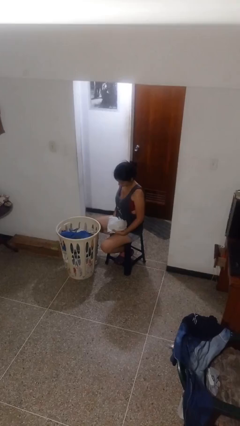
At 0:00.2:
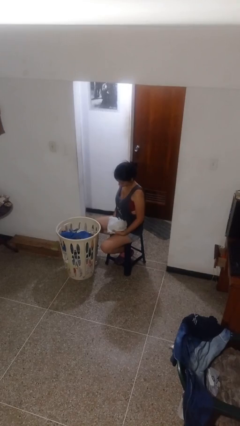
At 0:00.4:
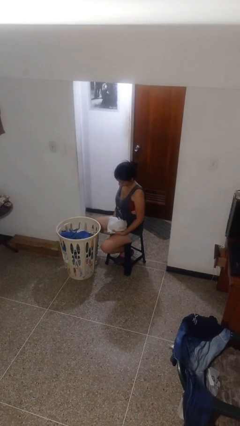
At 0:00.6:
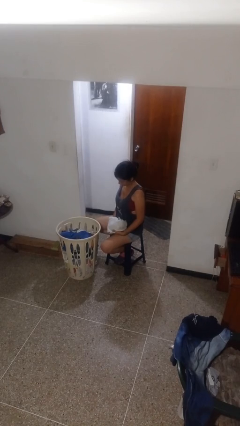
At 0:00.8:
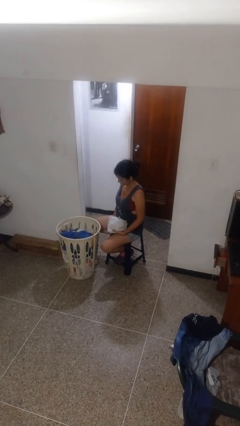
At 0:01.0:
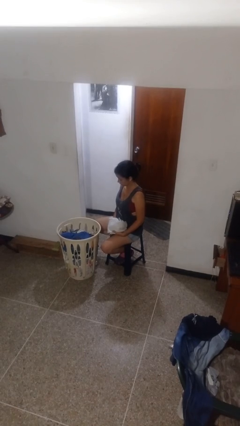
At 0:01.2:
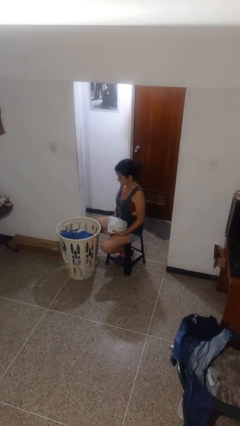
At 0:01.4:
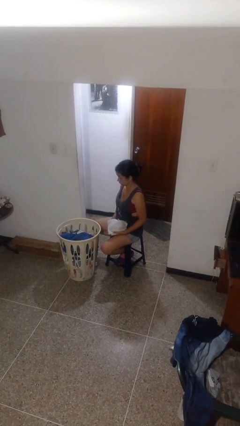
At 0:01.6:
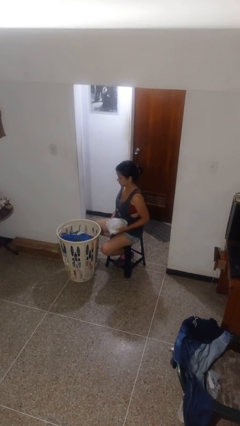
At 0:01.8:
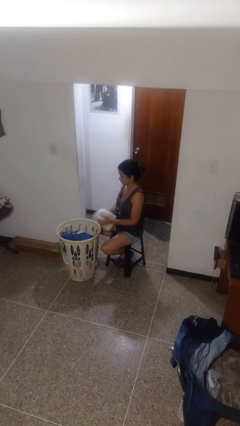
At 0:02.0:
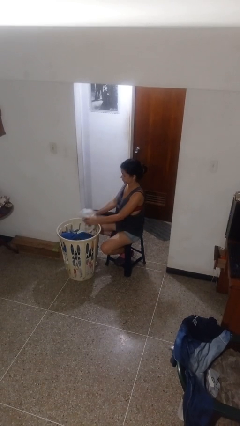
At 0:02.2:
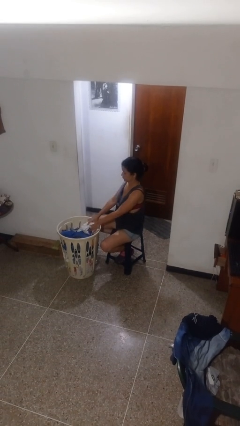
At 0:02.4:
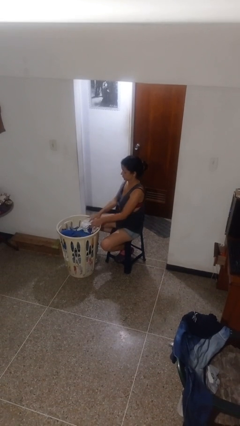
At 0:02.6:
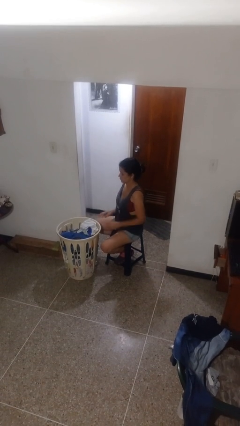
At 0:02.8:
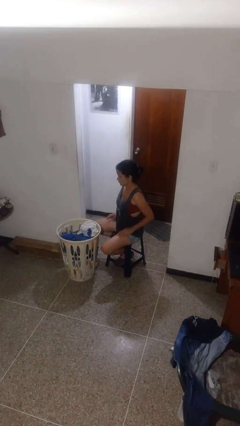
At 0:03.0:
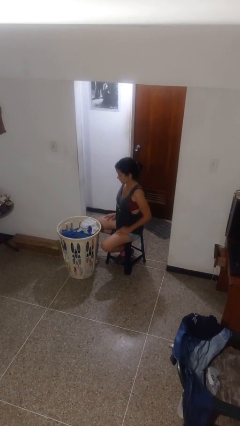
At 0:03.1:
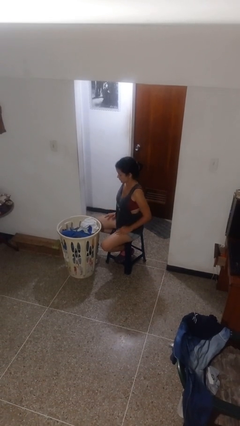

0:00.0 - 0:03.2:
person puts object into basket

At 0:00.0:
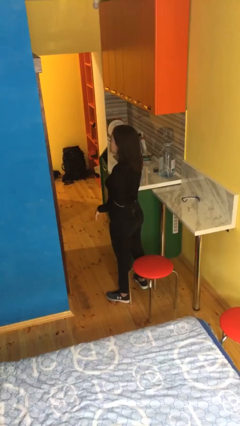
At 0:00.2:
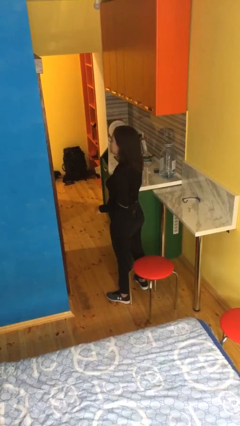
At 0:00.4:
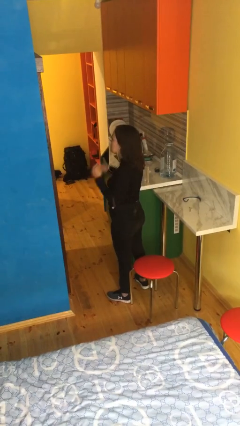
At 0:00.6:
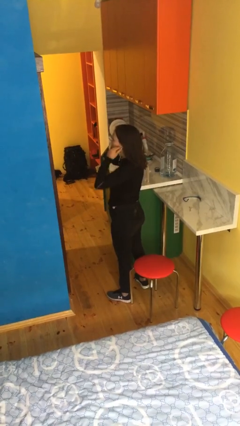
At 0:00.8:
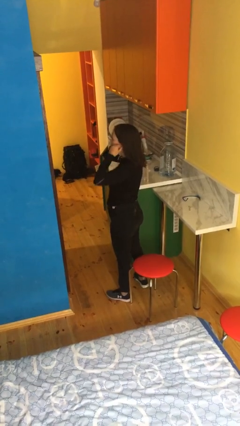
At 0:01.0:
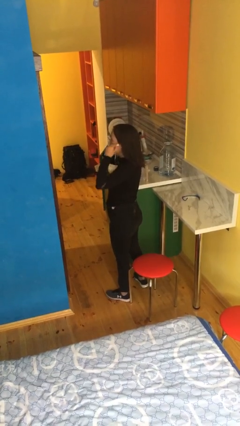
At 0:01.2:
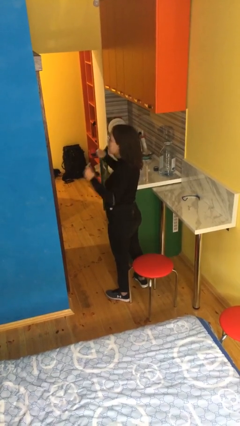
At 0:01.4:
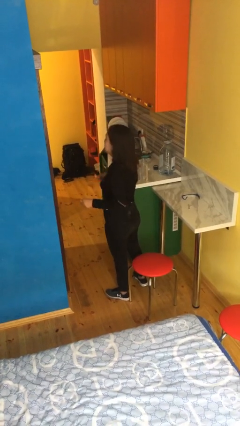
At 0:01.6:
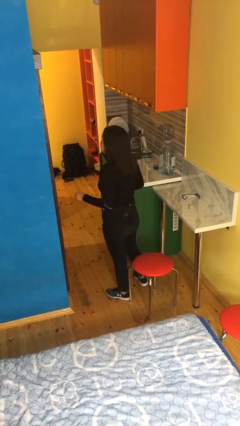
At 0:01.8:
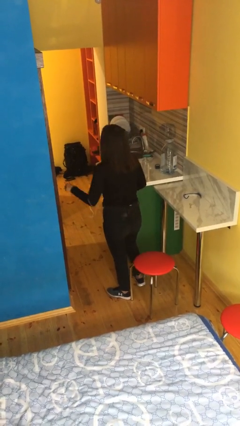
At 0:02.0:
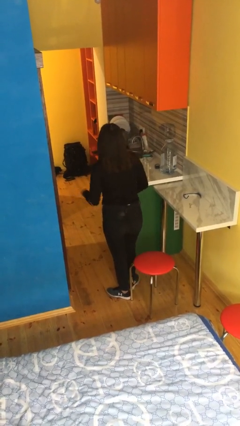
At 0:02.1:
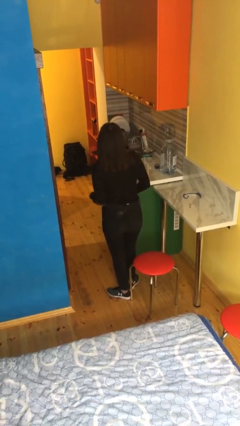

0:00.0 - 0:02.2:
person takes off headphones

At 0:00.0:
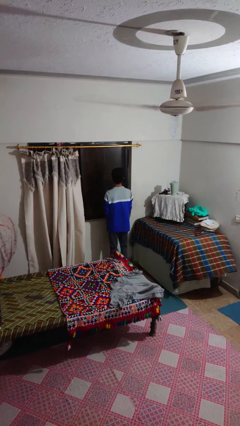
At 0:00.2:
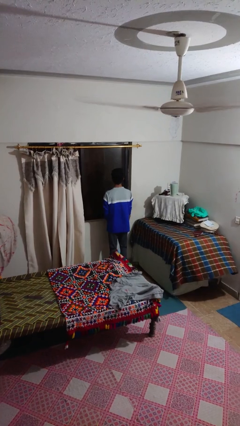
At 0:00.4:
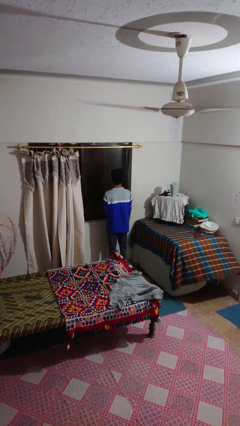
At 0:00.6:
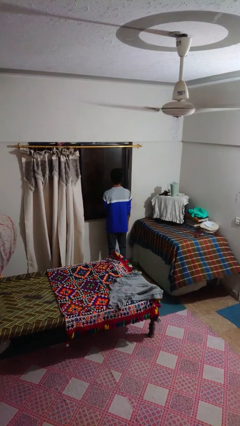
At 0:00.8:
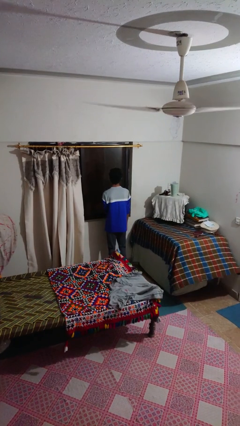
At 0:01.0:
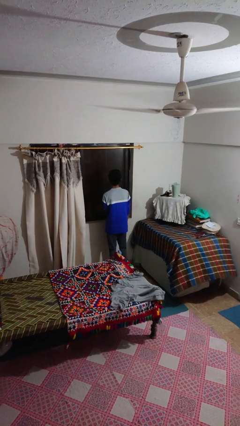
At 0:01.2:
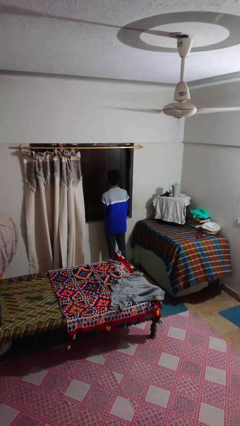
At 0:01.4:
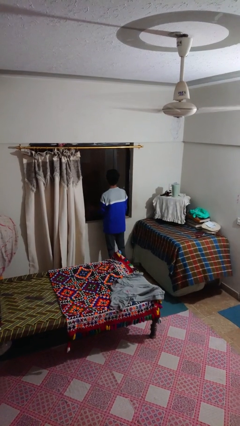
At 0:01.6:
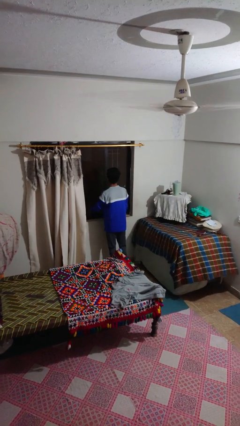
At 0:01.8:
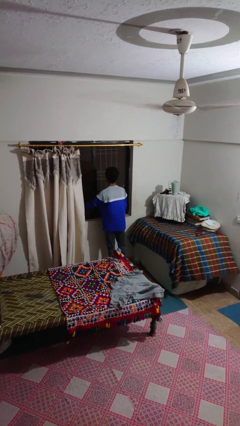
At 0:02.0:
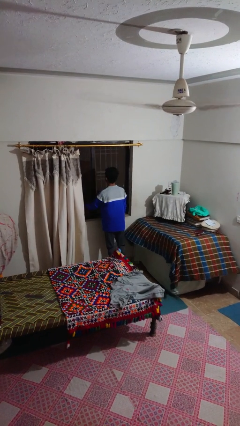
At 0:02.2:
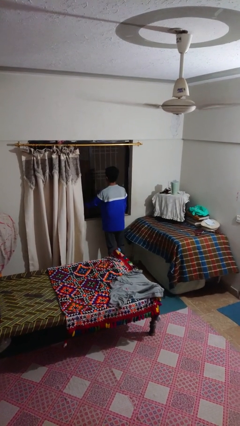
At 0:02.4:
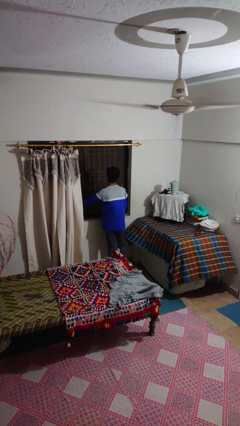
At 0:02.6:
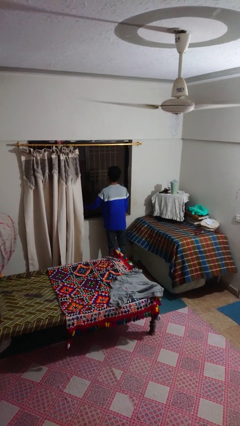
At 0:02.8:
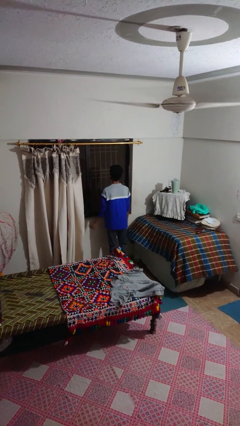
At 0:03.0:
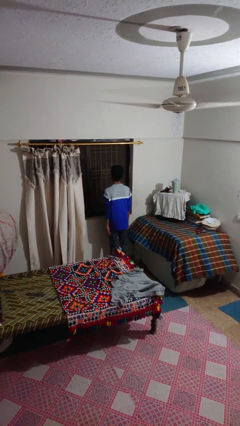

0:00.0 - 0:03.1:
person opens home window

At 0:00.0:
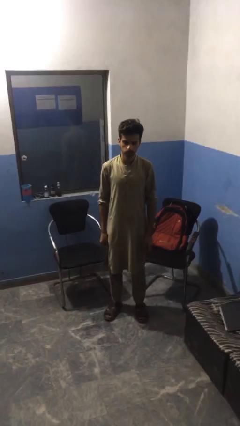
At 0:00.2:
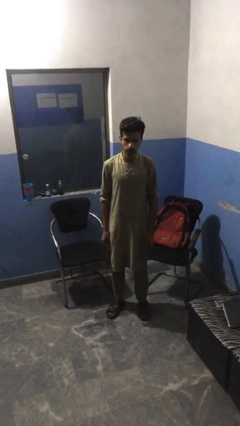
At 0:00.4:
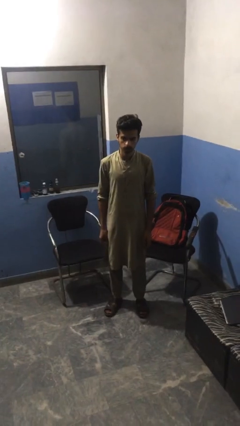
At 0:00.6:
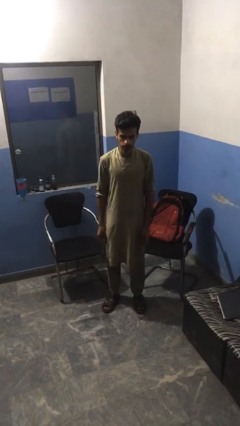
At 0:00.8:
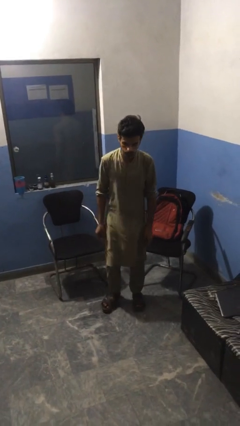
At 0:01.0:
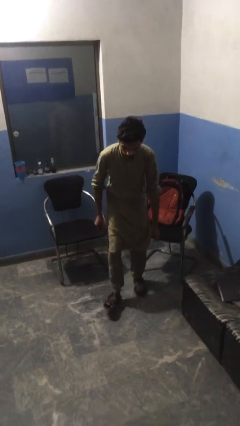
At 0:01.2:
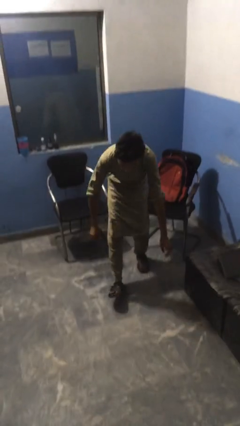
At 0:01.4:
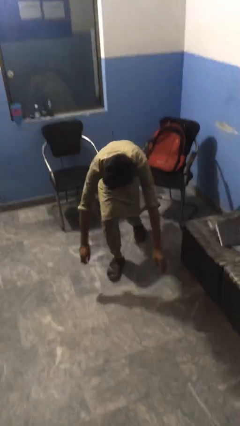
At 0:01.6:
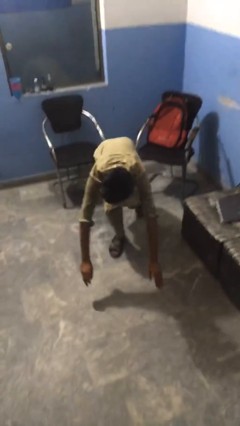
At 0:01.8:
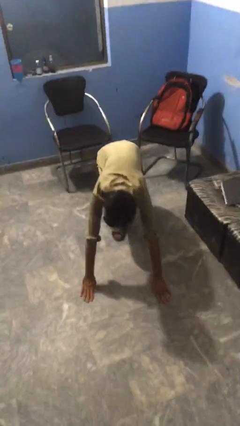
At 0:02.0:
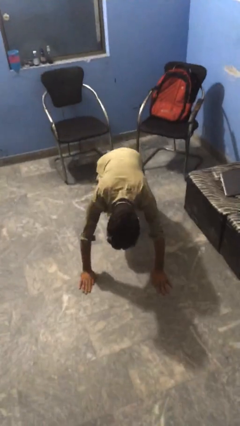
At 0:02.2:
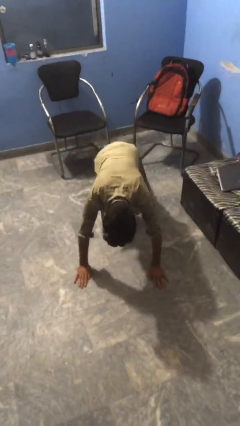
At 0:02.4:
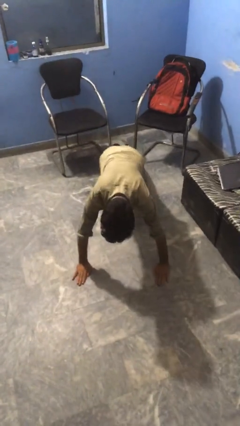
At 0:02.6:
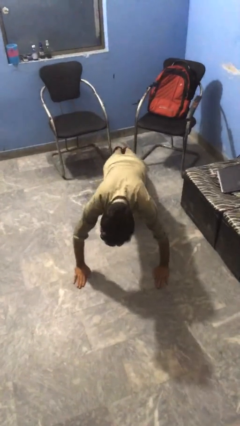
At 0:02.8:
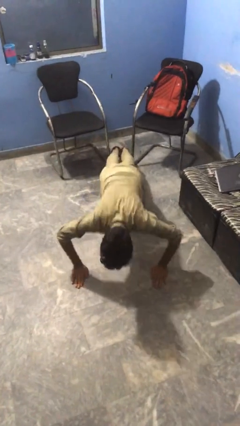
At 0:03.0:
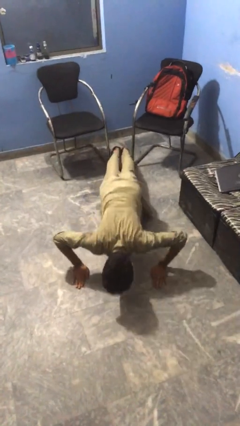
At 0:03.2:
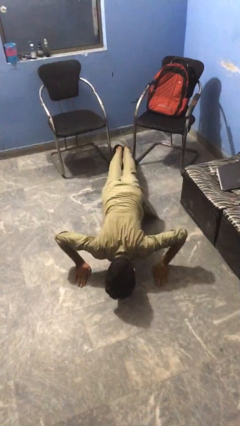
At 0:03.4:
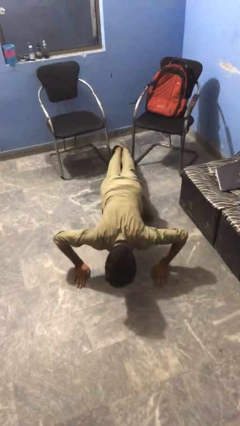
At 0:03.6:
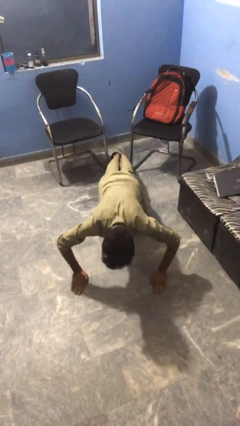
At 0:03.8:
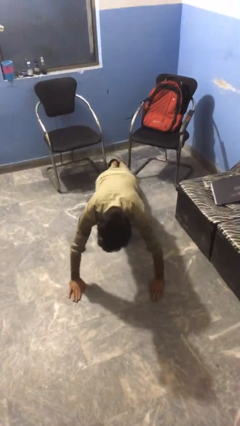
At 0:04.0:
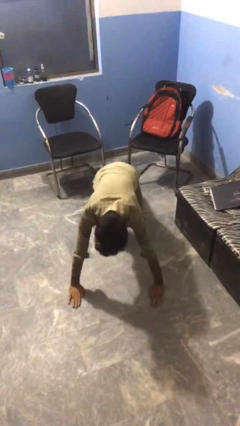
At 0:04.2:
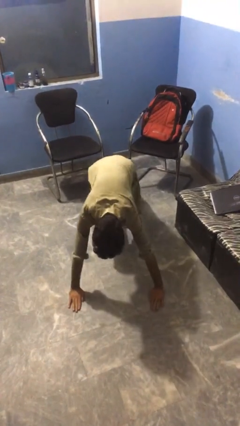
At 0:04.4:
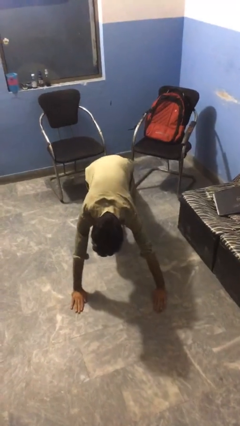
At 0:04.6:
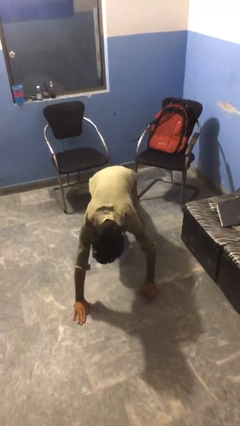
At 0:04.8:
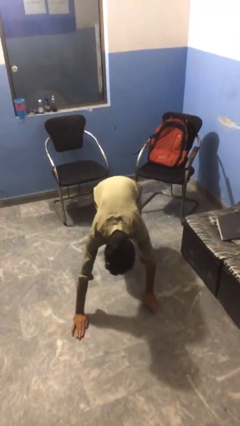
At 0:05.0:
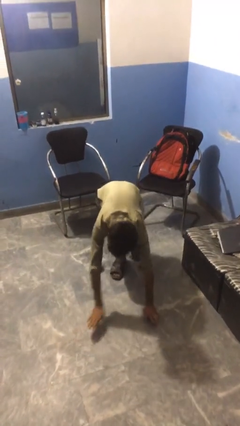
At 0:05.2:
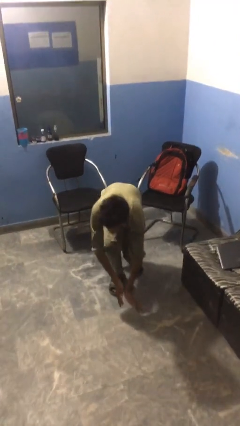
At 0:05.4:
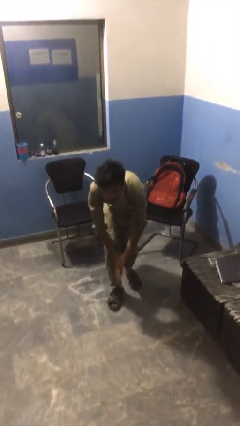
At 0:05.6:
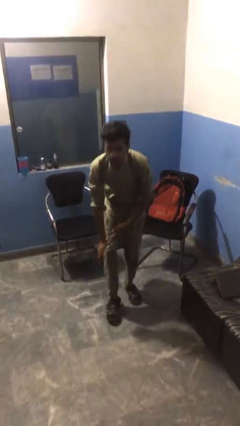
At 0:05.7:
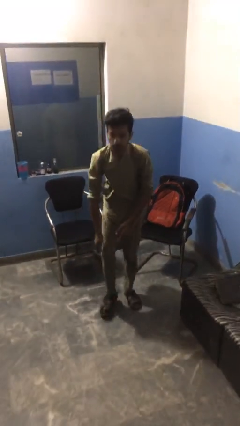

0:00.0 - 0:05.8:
person exercises with pushup

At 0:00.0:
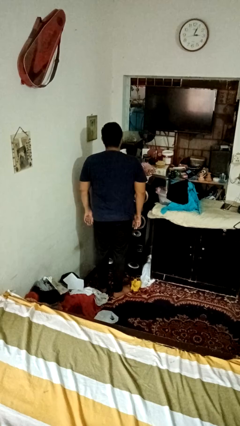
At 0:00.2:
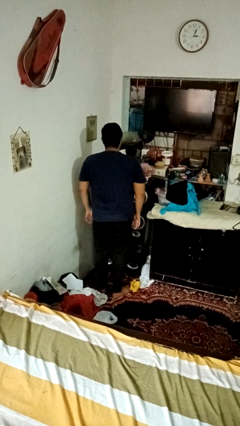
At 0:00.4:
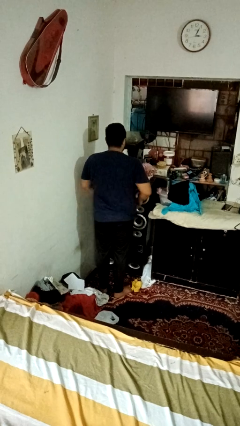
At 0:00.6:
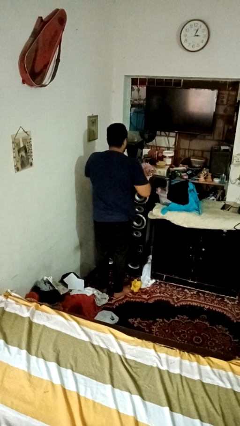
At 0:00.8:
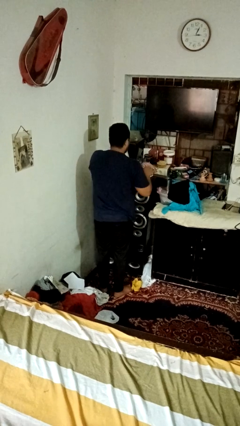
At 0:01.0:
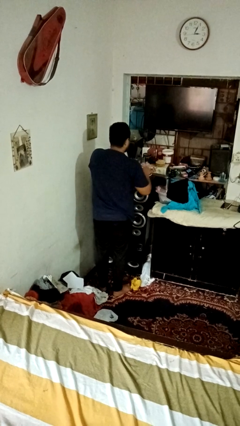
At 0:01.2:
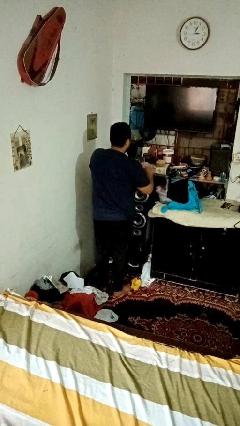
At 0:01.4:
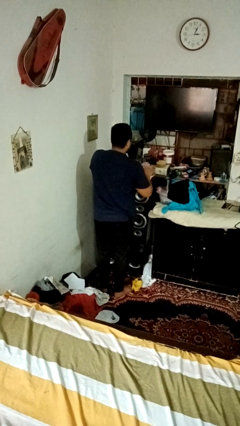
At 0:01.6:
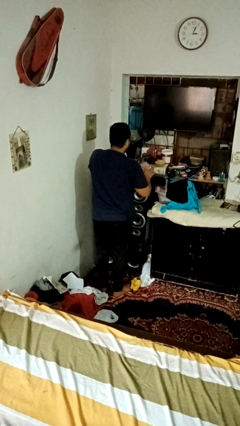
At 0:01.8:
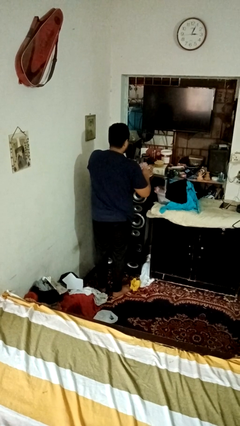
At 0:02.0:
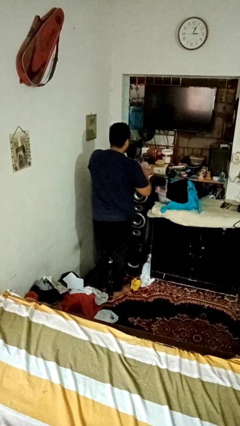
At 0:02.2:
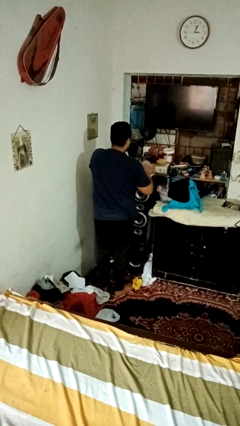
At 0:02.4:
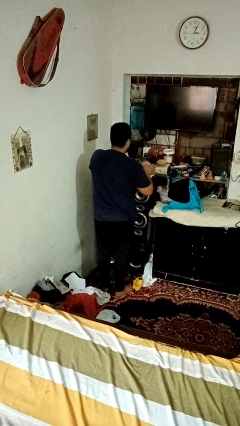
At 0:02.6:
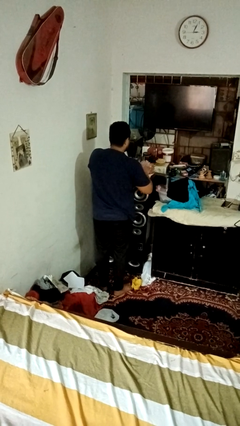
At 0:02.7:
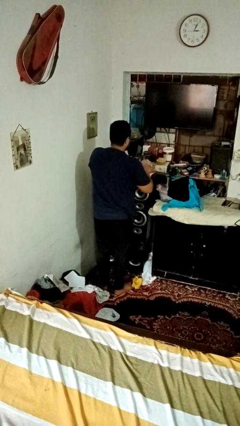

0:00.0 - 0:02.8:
person arranges flowers in vase

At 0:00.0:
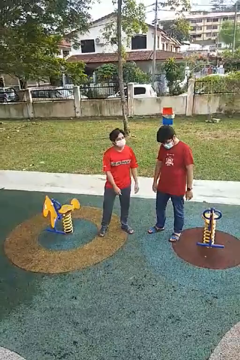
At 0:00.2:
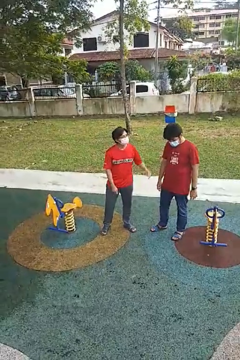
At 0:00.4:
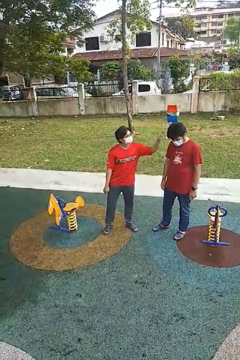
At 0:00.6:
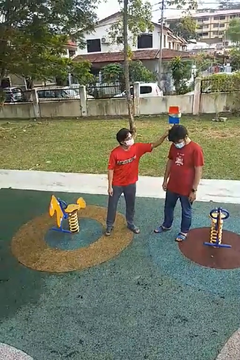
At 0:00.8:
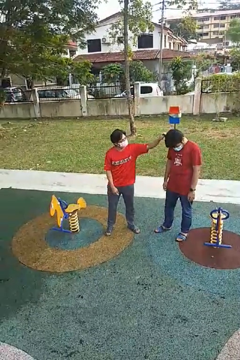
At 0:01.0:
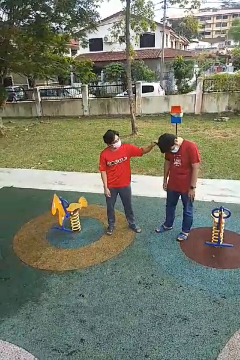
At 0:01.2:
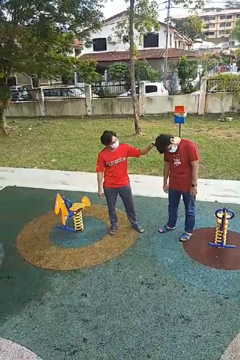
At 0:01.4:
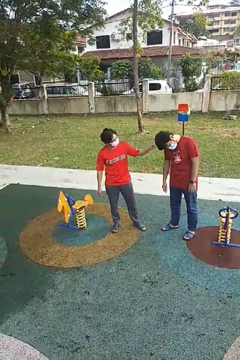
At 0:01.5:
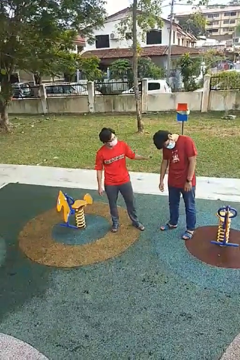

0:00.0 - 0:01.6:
person grabs person by hair
